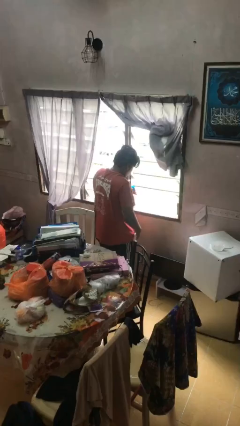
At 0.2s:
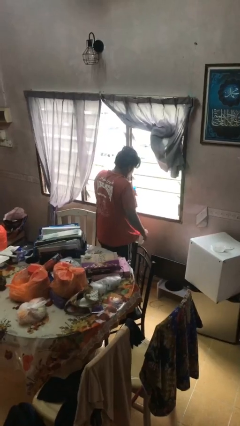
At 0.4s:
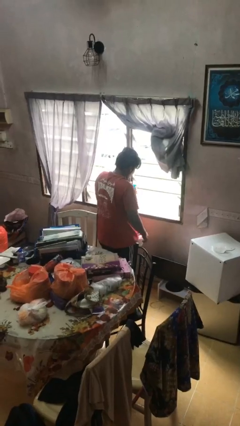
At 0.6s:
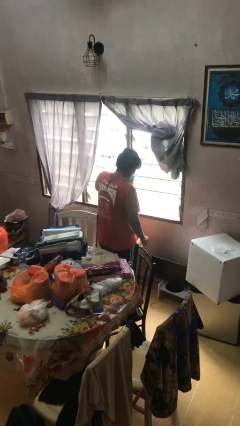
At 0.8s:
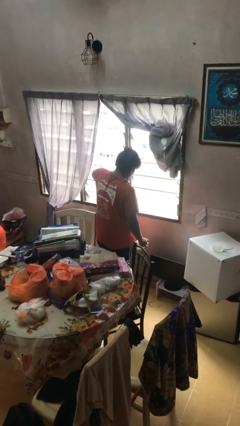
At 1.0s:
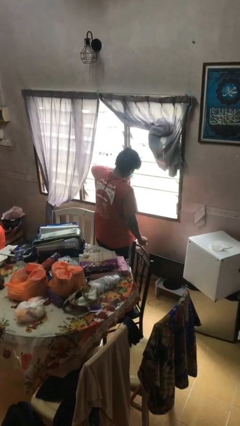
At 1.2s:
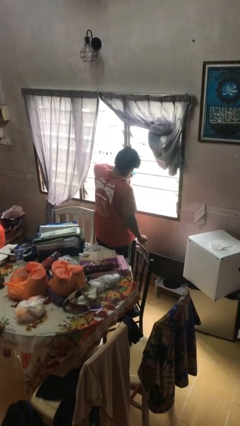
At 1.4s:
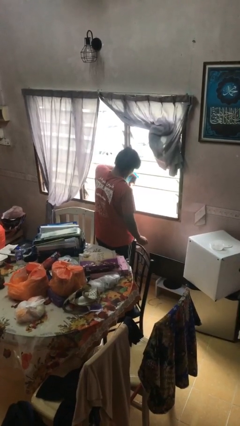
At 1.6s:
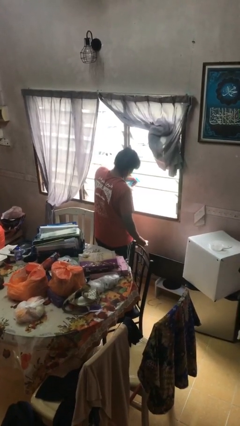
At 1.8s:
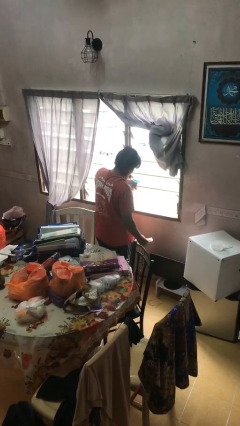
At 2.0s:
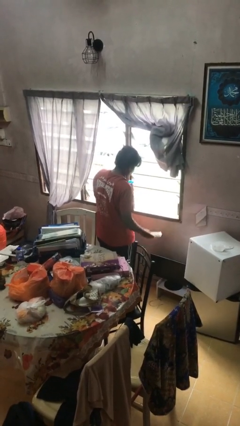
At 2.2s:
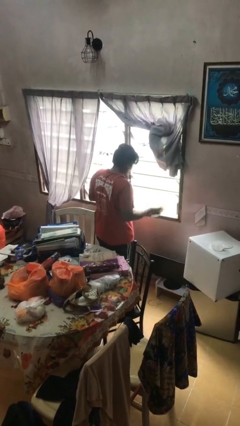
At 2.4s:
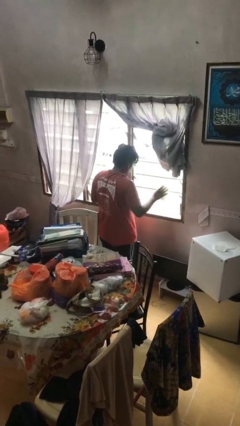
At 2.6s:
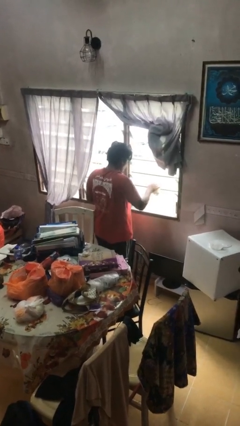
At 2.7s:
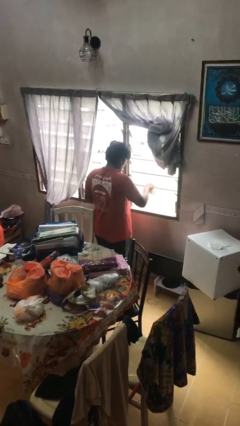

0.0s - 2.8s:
person sprays from bottle

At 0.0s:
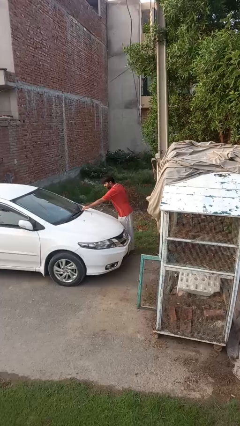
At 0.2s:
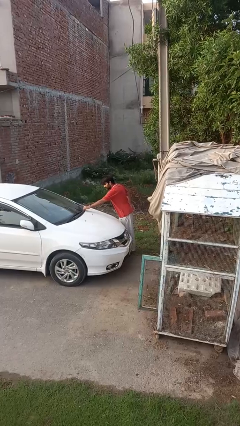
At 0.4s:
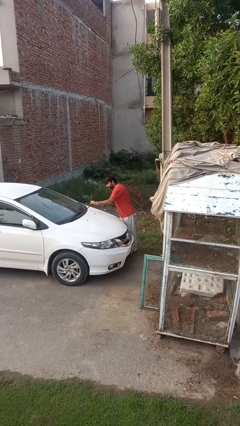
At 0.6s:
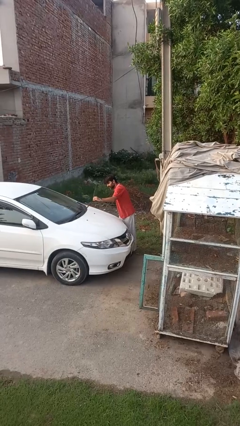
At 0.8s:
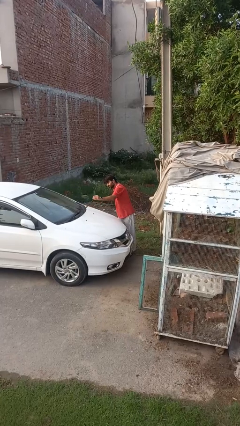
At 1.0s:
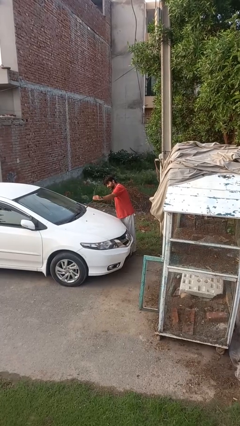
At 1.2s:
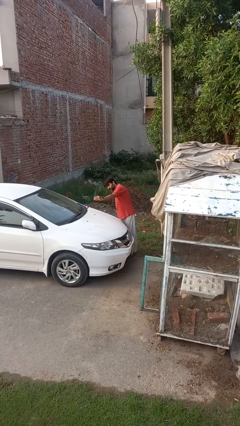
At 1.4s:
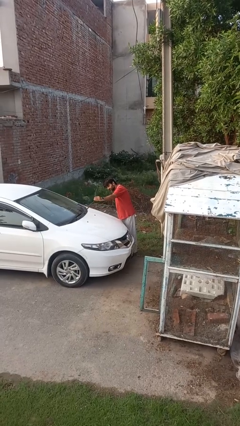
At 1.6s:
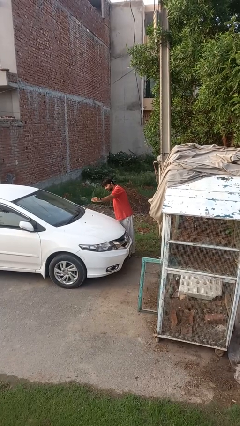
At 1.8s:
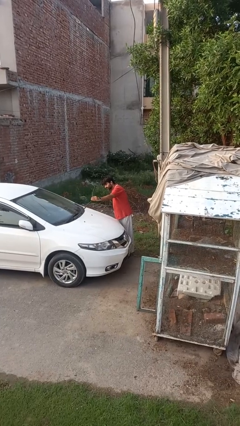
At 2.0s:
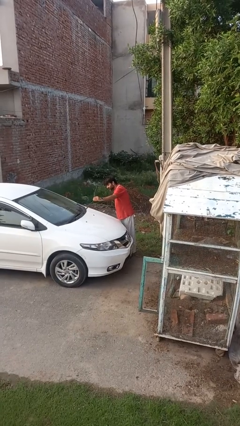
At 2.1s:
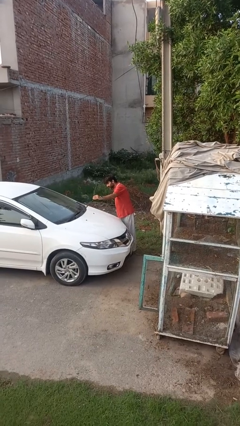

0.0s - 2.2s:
person flips up car wipers

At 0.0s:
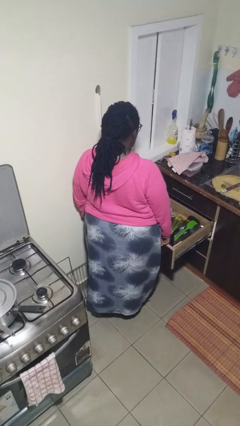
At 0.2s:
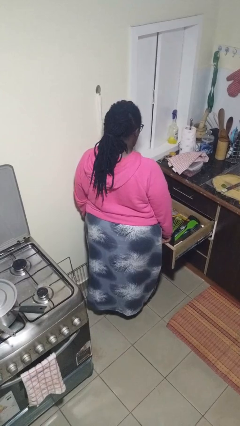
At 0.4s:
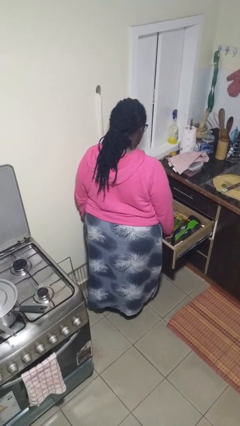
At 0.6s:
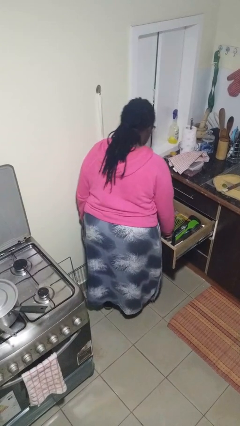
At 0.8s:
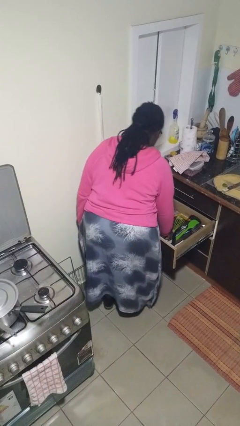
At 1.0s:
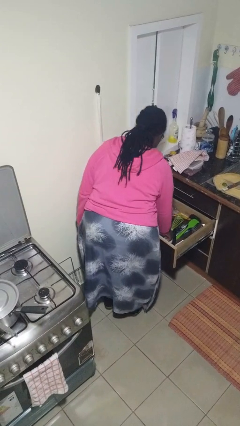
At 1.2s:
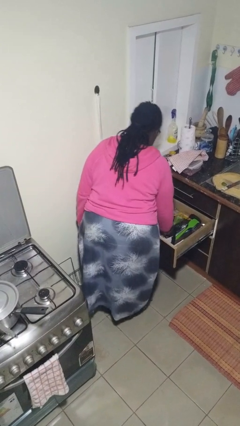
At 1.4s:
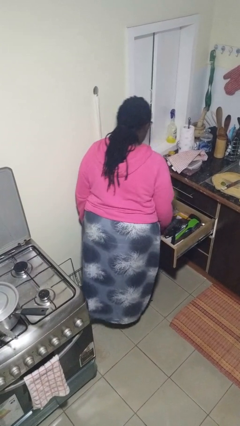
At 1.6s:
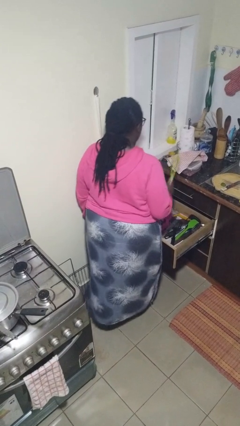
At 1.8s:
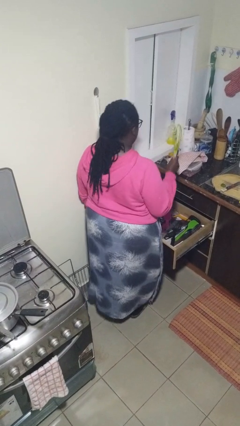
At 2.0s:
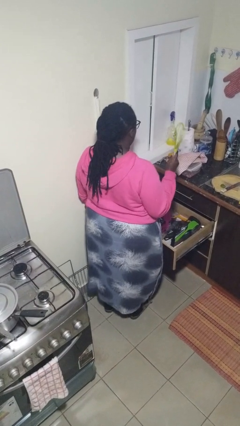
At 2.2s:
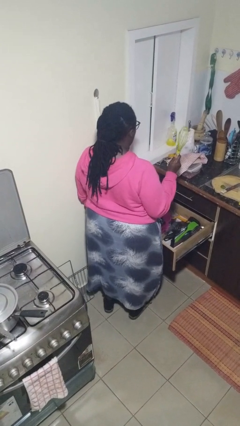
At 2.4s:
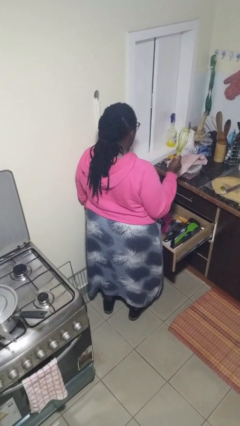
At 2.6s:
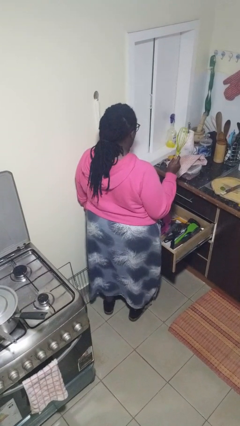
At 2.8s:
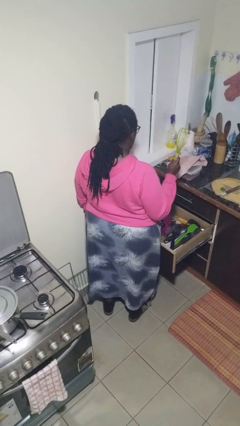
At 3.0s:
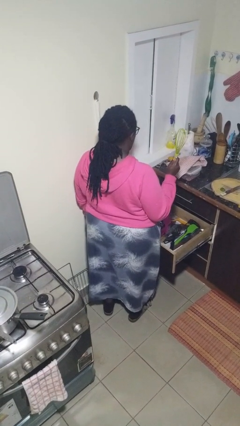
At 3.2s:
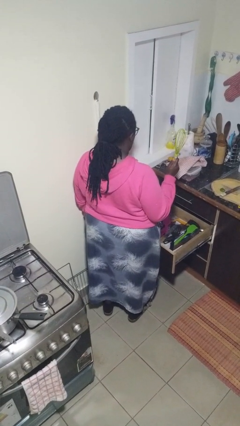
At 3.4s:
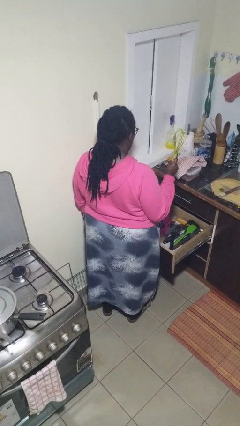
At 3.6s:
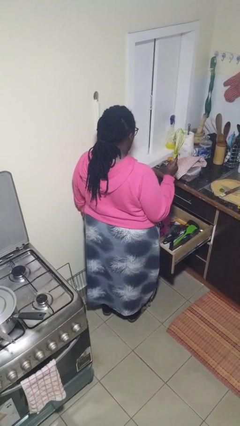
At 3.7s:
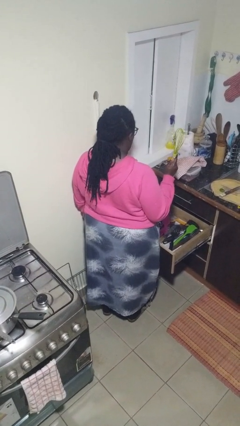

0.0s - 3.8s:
person takes object from kitchen drawer

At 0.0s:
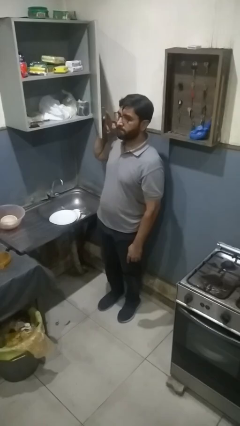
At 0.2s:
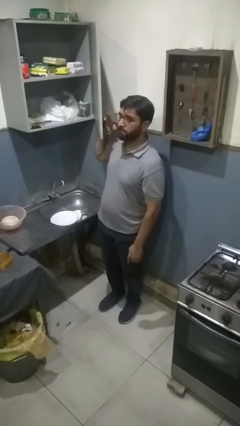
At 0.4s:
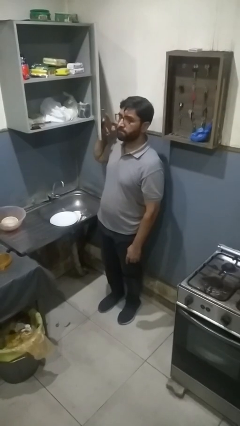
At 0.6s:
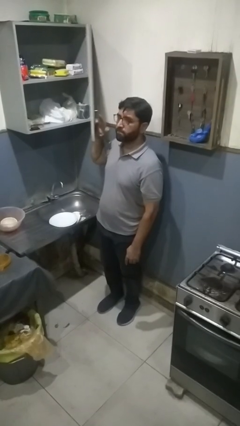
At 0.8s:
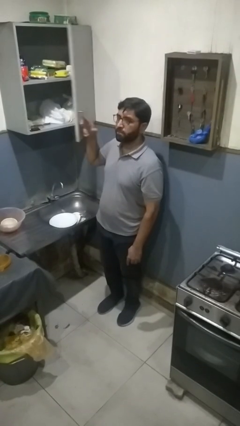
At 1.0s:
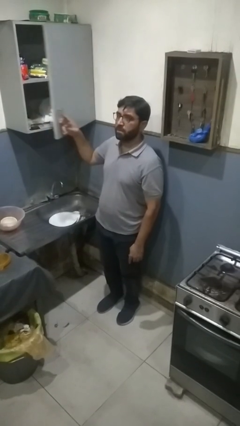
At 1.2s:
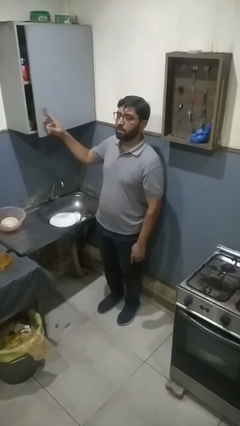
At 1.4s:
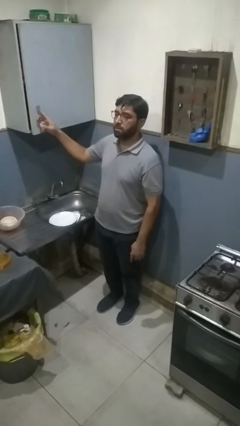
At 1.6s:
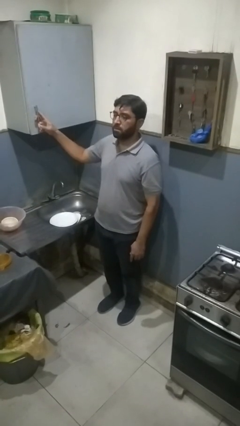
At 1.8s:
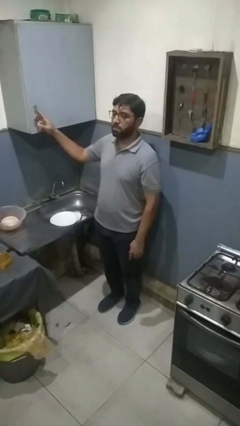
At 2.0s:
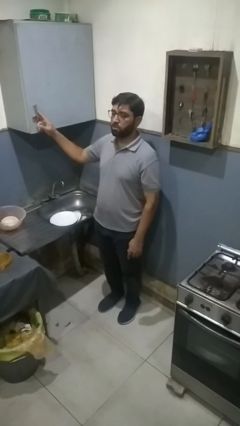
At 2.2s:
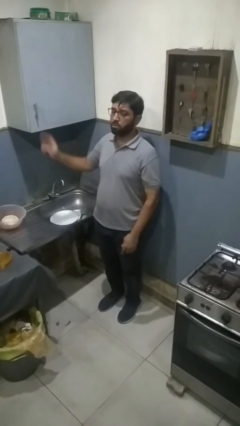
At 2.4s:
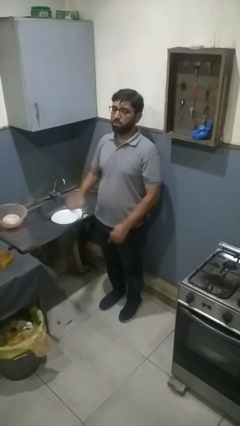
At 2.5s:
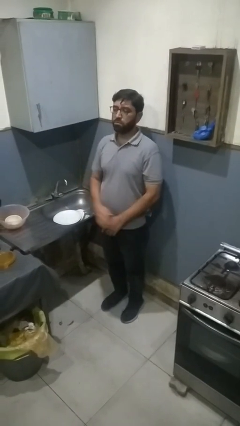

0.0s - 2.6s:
person closes cabinet

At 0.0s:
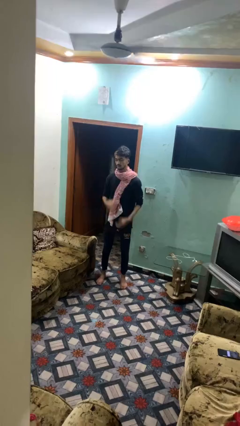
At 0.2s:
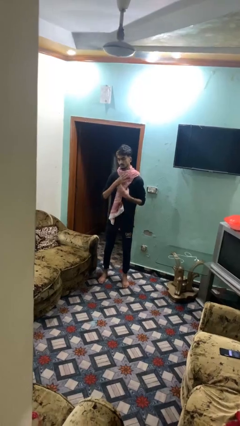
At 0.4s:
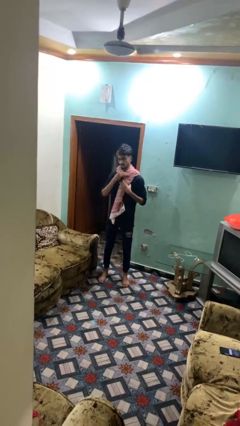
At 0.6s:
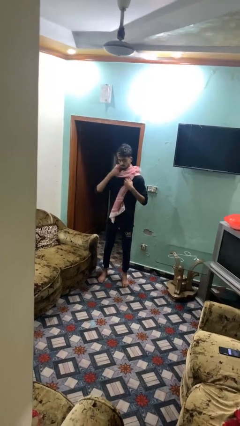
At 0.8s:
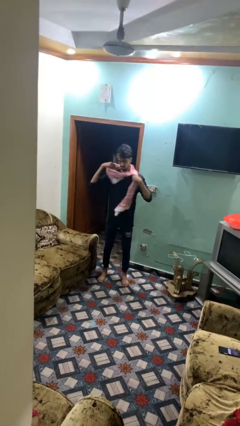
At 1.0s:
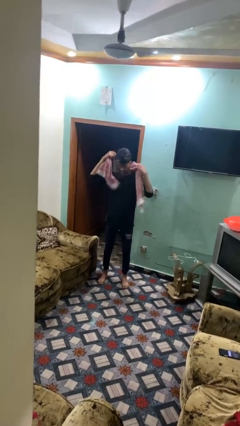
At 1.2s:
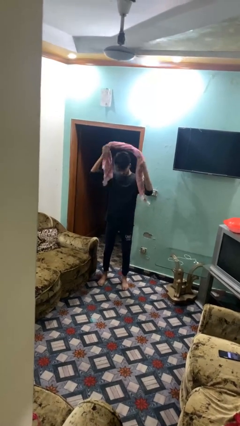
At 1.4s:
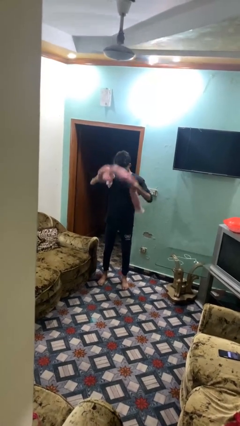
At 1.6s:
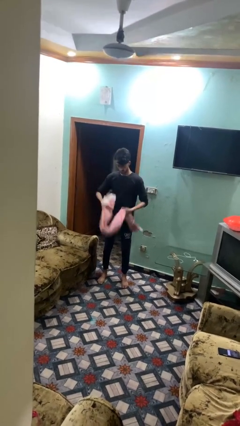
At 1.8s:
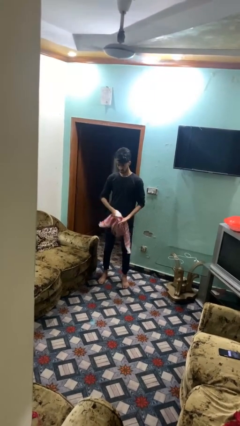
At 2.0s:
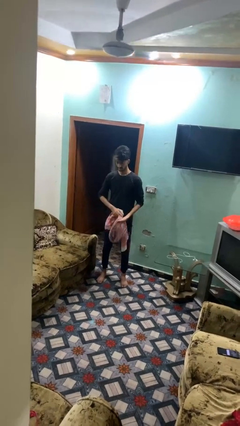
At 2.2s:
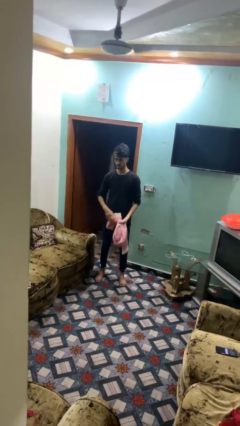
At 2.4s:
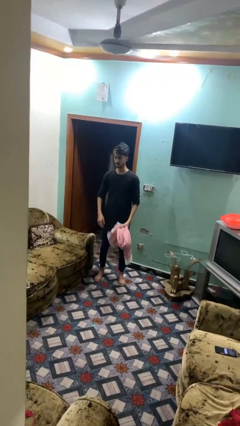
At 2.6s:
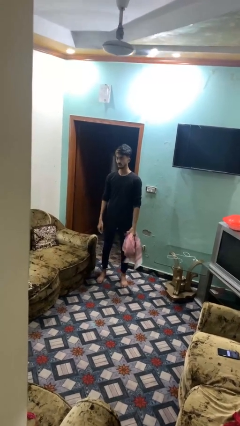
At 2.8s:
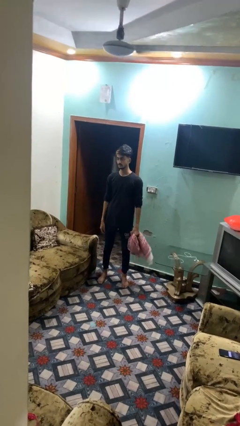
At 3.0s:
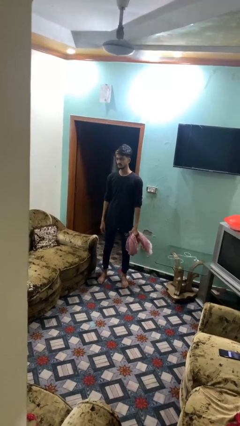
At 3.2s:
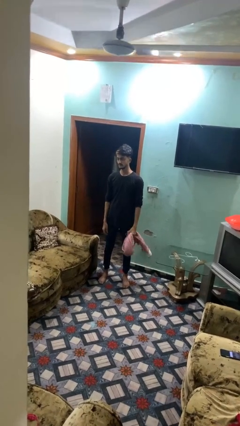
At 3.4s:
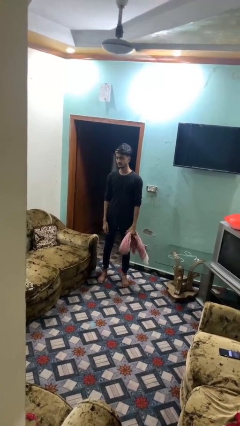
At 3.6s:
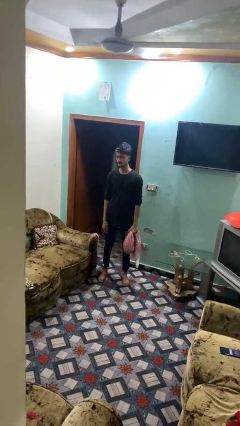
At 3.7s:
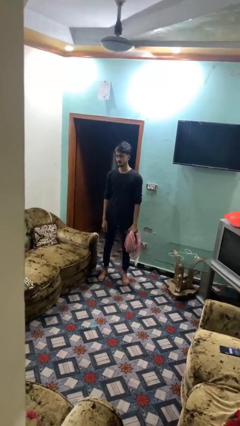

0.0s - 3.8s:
person takes off scarf

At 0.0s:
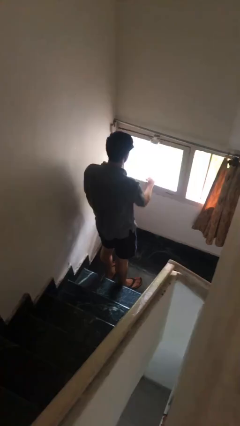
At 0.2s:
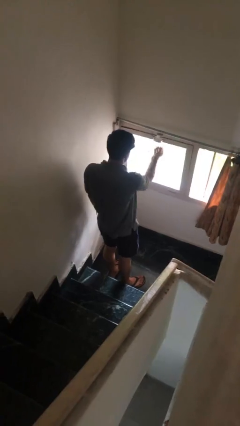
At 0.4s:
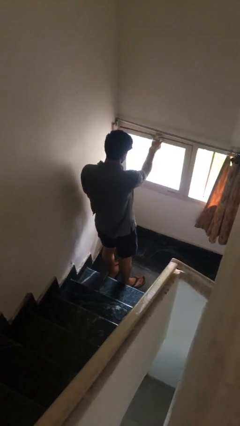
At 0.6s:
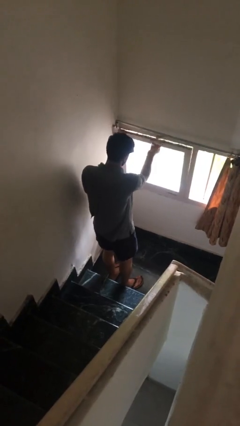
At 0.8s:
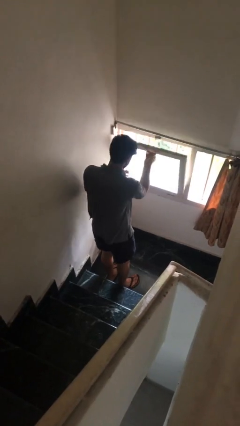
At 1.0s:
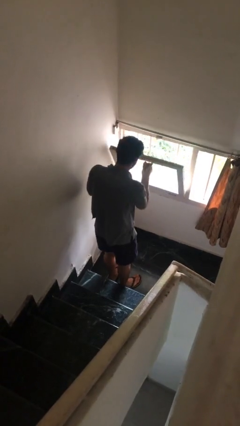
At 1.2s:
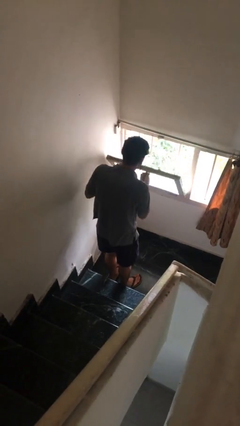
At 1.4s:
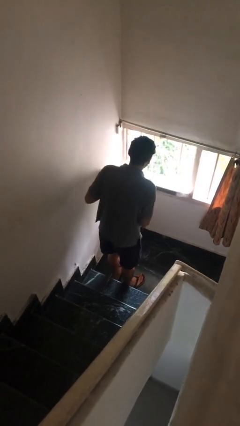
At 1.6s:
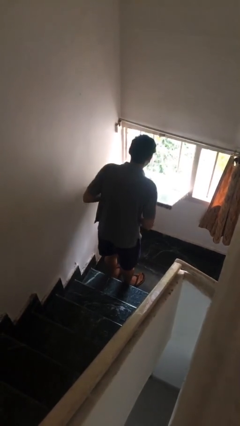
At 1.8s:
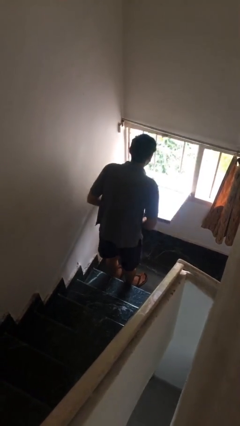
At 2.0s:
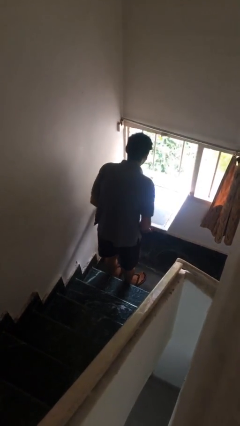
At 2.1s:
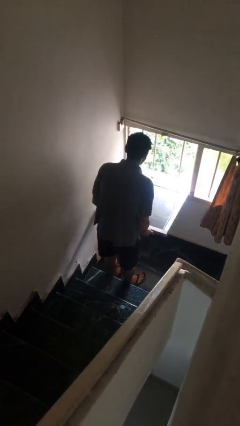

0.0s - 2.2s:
person opens home window
